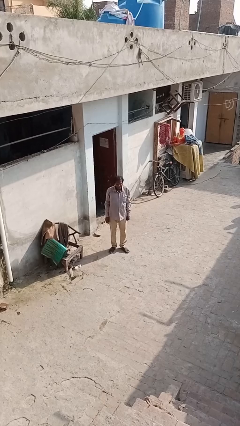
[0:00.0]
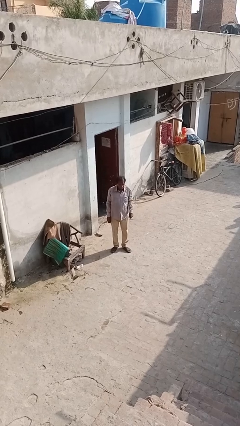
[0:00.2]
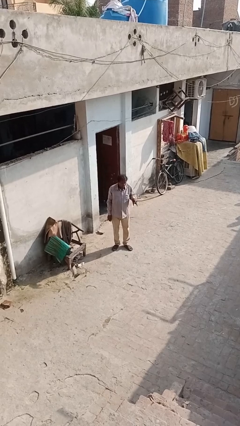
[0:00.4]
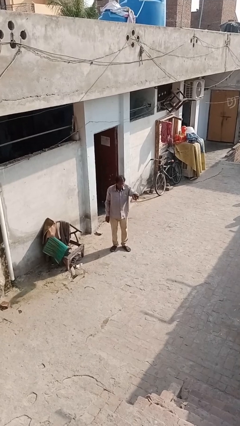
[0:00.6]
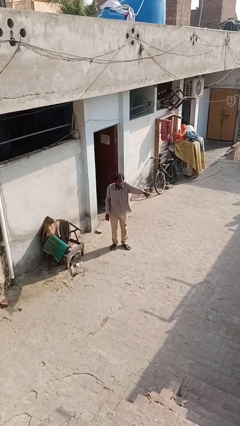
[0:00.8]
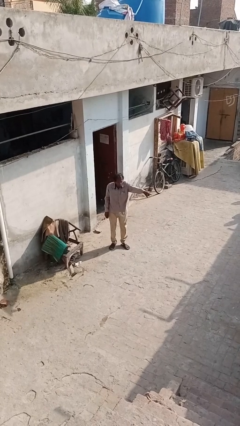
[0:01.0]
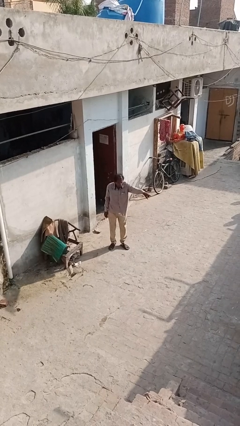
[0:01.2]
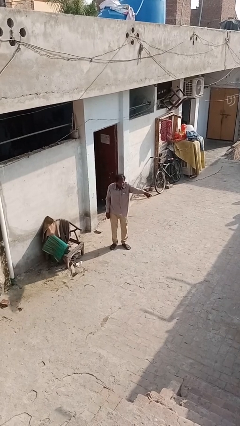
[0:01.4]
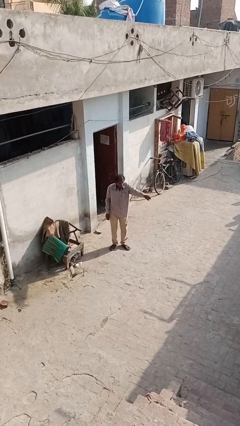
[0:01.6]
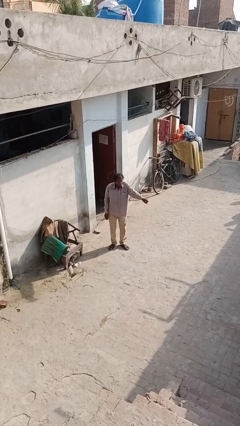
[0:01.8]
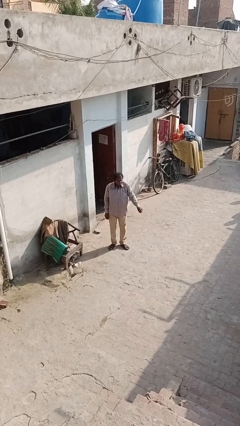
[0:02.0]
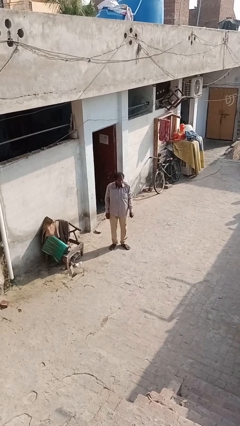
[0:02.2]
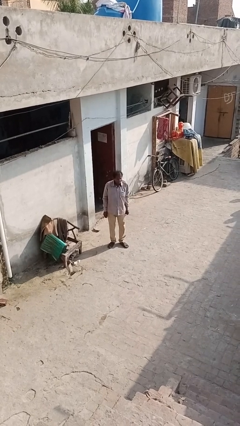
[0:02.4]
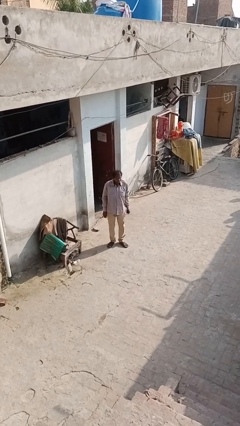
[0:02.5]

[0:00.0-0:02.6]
person points at person

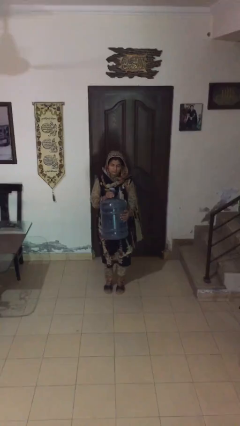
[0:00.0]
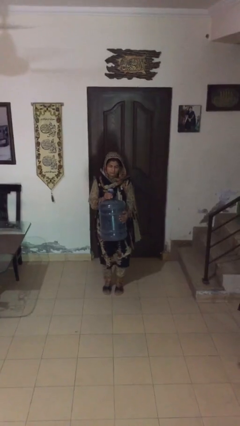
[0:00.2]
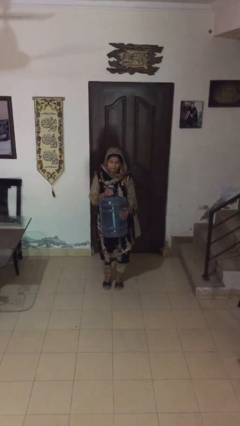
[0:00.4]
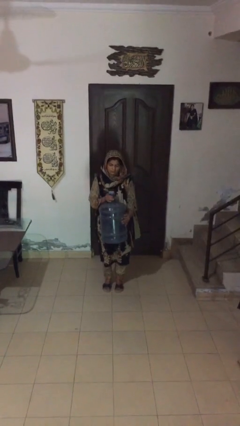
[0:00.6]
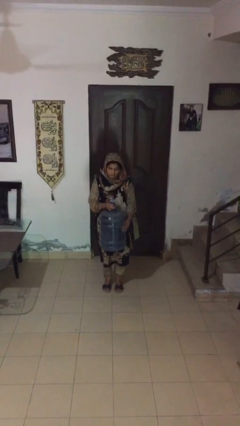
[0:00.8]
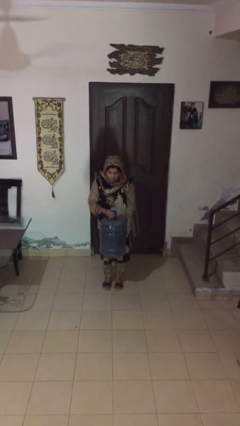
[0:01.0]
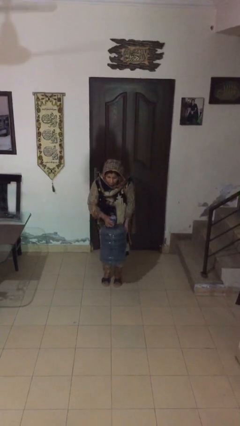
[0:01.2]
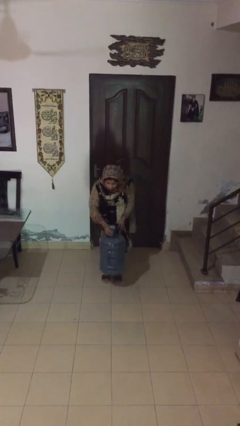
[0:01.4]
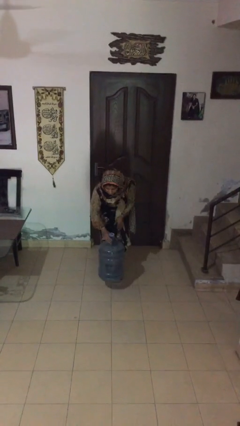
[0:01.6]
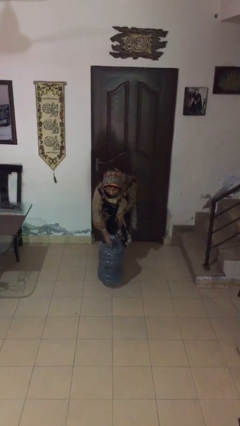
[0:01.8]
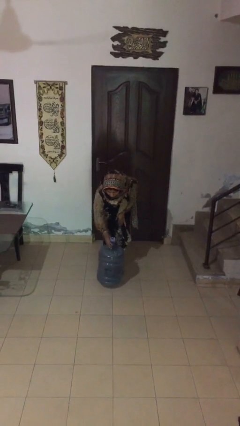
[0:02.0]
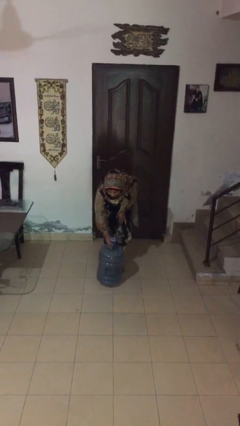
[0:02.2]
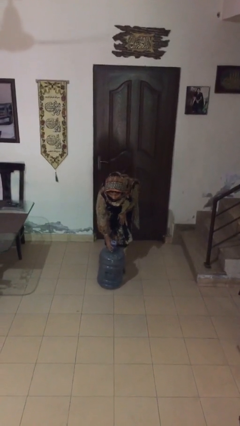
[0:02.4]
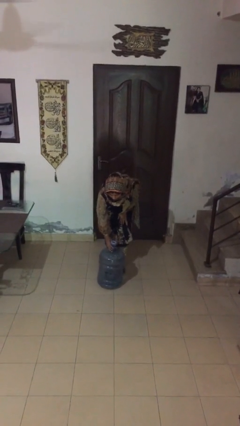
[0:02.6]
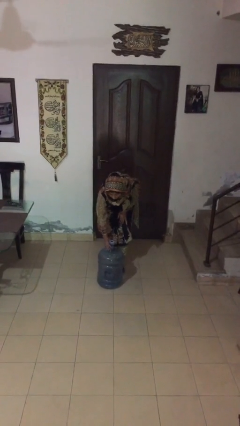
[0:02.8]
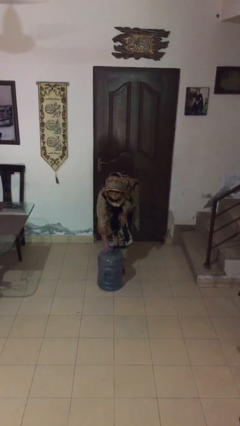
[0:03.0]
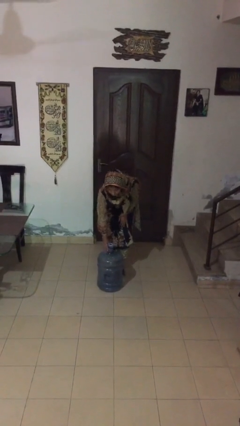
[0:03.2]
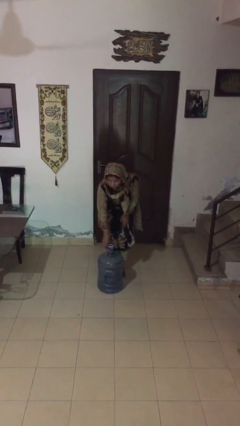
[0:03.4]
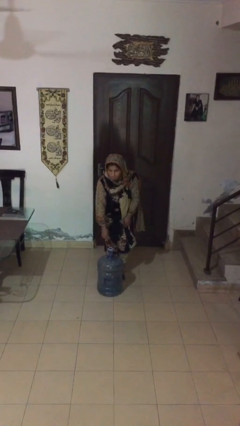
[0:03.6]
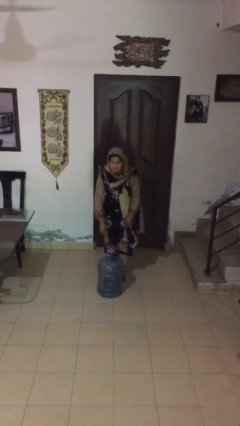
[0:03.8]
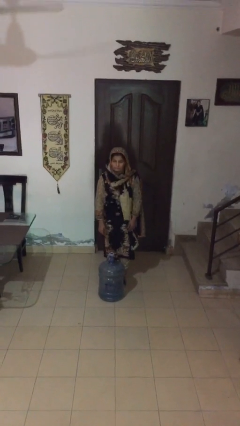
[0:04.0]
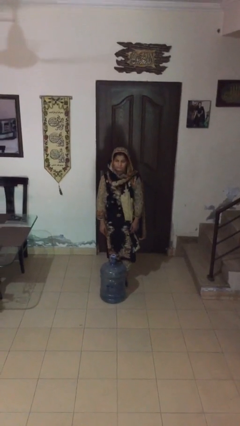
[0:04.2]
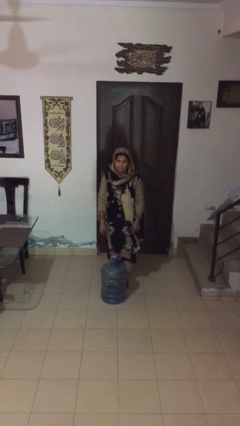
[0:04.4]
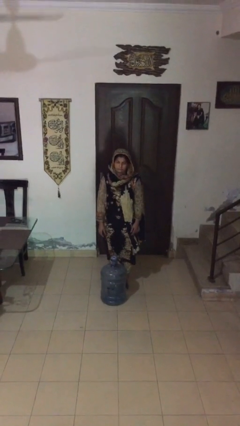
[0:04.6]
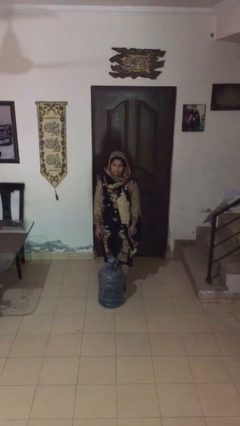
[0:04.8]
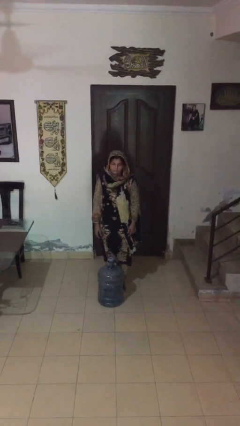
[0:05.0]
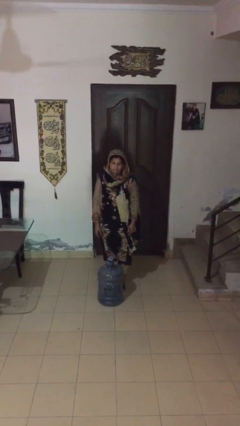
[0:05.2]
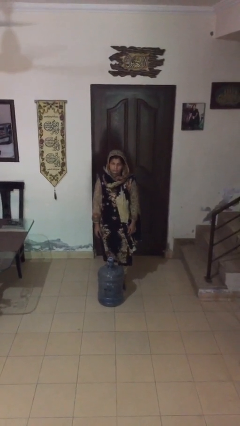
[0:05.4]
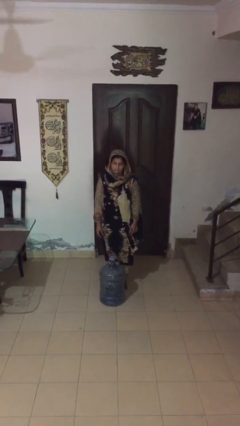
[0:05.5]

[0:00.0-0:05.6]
person puts down object on floor

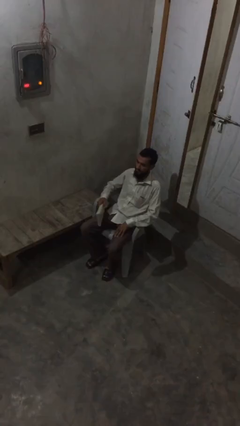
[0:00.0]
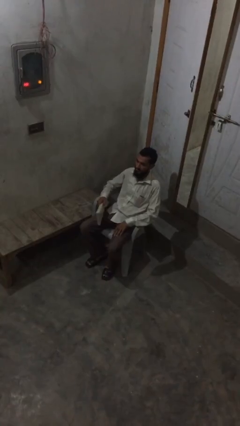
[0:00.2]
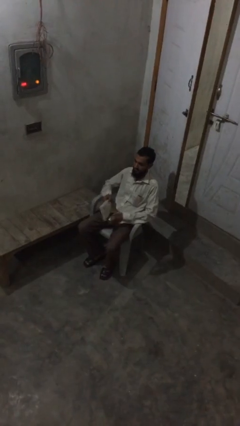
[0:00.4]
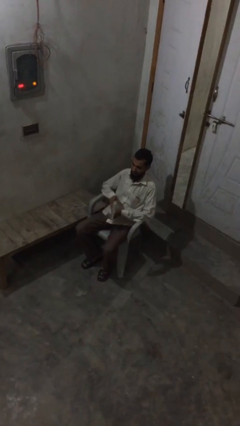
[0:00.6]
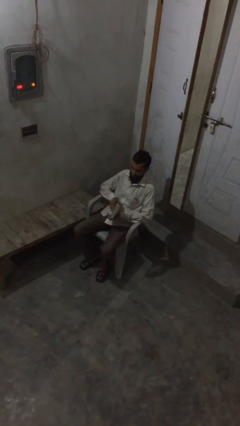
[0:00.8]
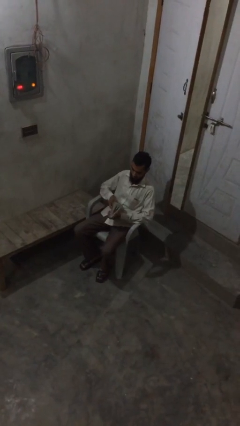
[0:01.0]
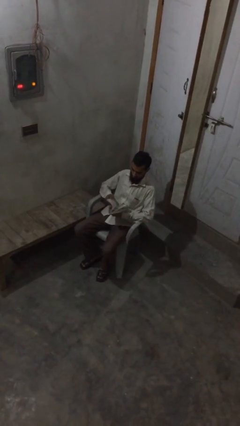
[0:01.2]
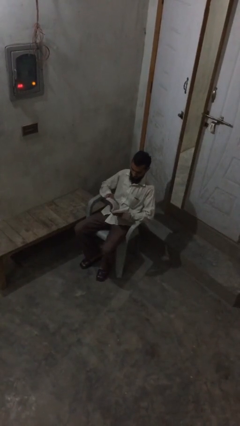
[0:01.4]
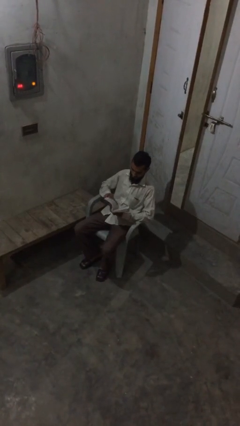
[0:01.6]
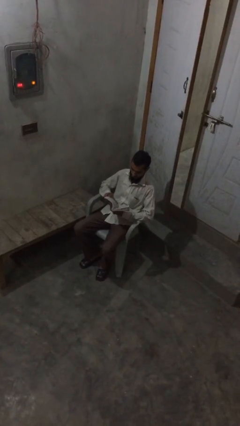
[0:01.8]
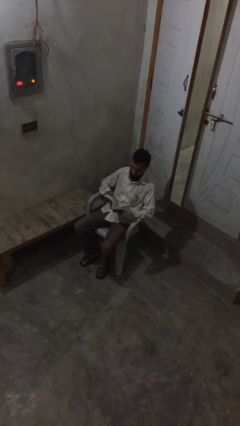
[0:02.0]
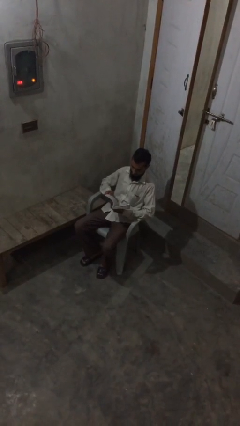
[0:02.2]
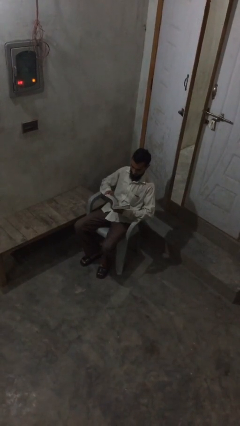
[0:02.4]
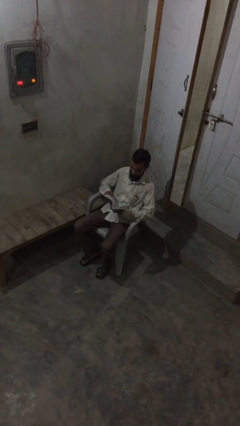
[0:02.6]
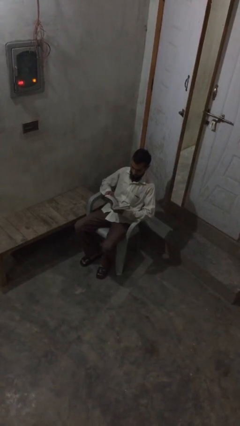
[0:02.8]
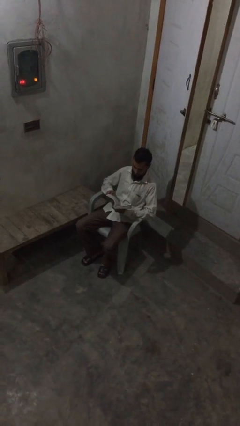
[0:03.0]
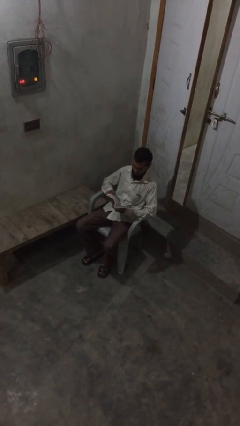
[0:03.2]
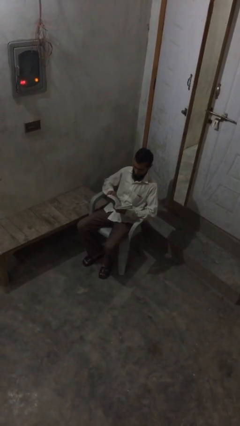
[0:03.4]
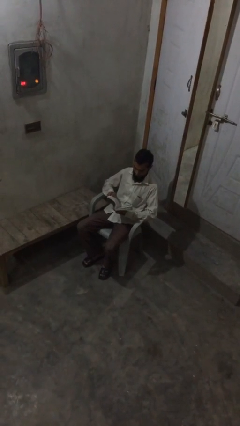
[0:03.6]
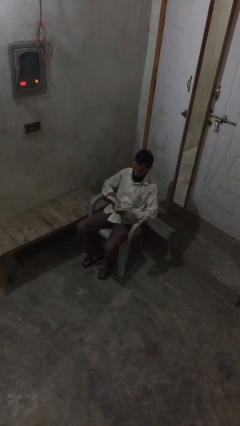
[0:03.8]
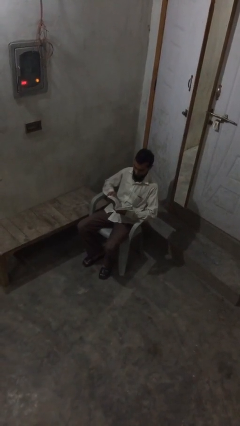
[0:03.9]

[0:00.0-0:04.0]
person reads document

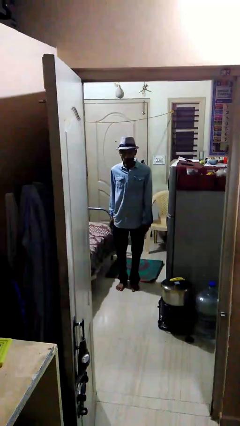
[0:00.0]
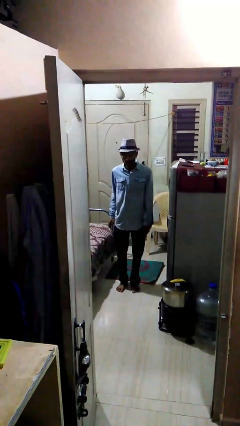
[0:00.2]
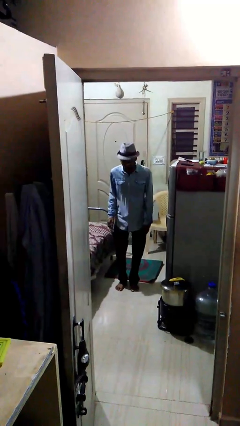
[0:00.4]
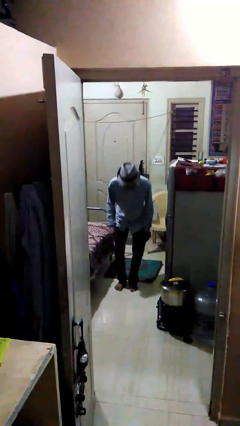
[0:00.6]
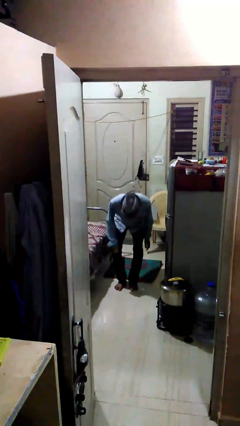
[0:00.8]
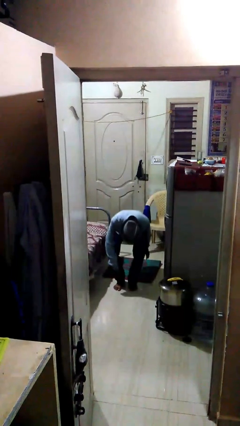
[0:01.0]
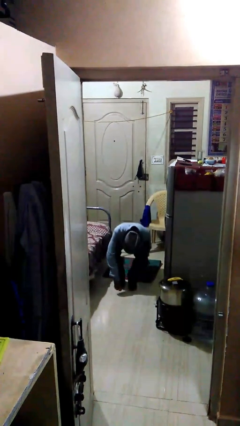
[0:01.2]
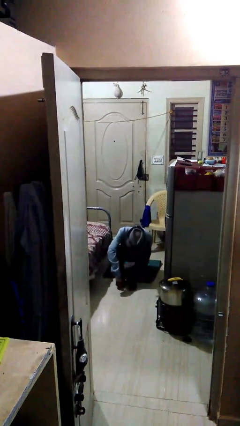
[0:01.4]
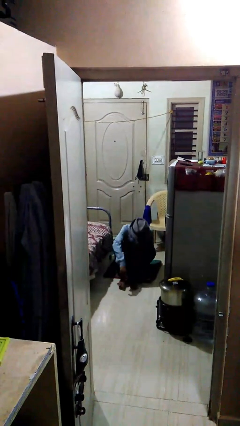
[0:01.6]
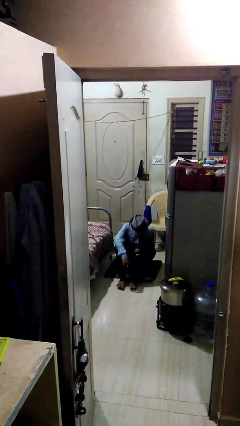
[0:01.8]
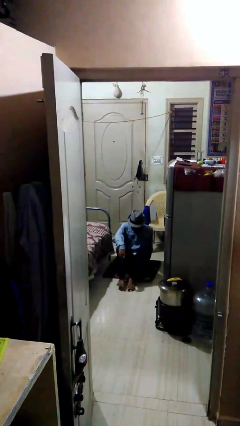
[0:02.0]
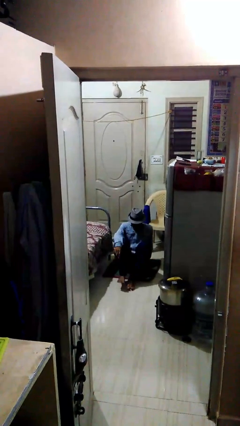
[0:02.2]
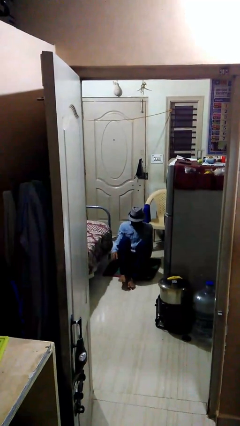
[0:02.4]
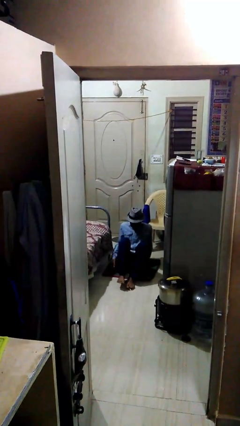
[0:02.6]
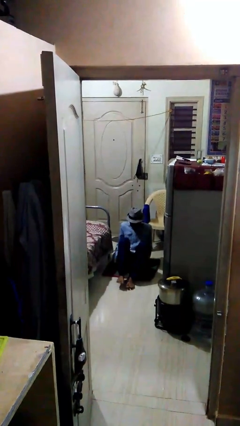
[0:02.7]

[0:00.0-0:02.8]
person sits down

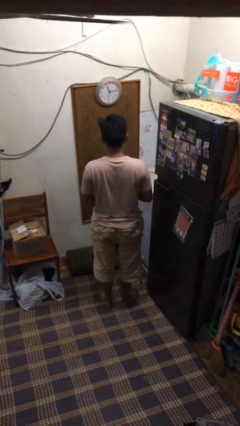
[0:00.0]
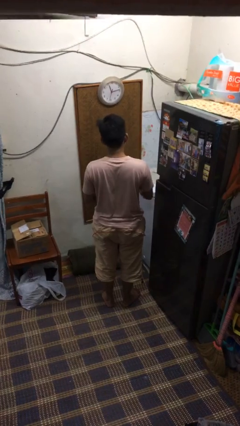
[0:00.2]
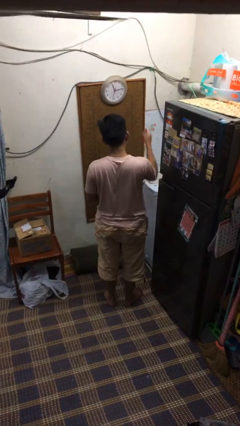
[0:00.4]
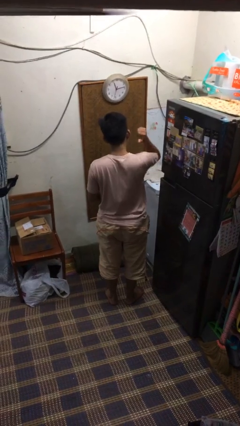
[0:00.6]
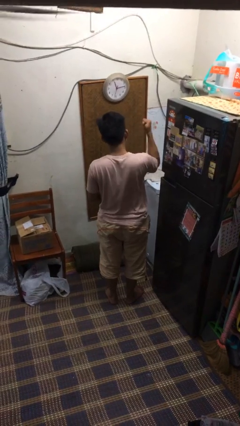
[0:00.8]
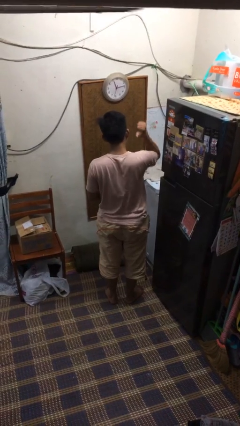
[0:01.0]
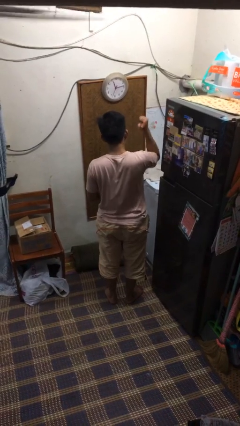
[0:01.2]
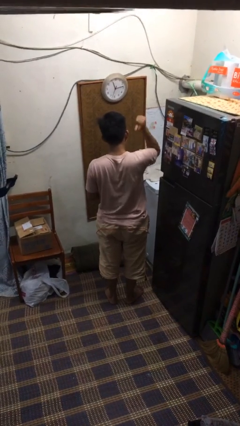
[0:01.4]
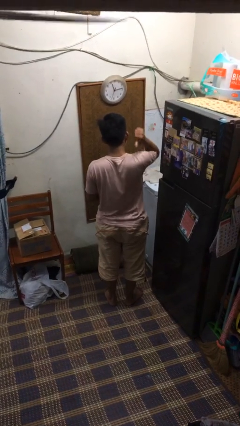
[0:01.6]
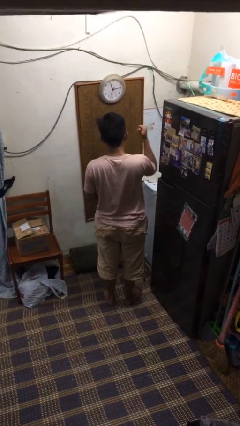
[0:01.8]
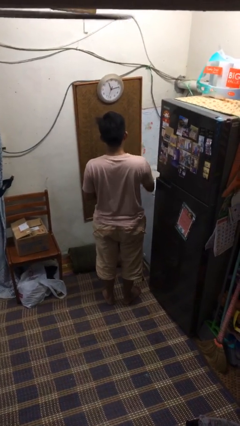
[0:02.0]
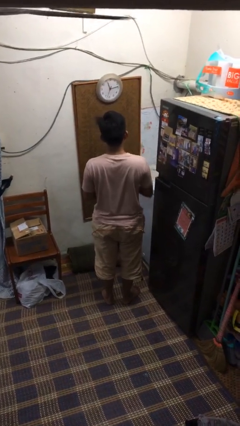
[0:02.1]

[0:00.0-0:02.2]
person gestures behind me
